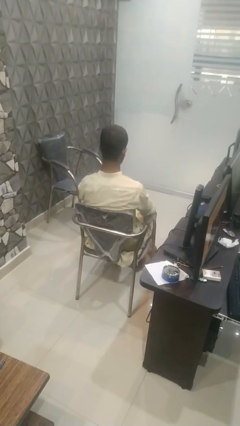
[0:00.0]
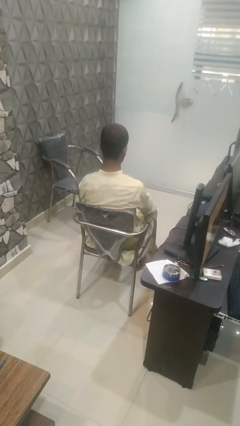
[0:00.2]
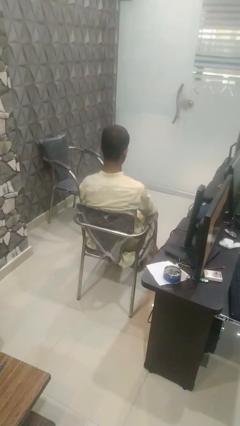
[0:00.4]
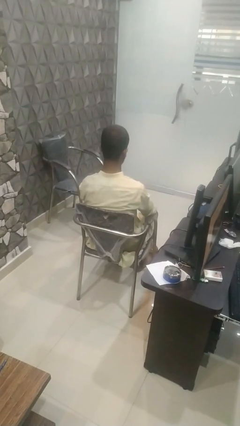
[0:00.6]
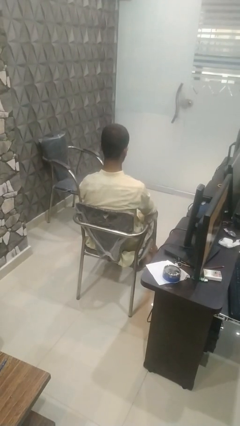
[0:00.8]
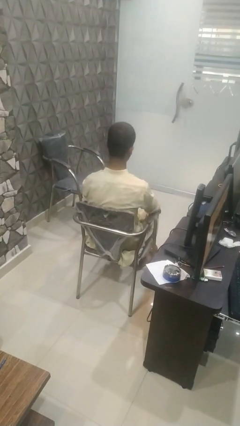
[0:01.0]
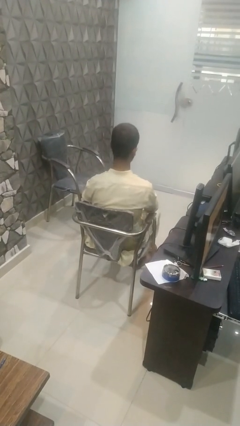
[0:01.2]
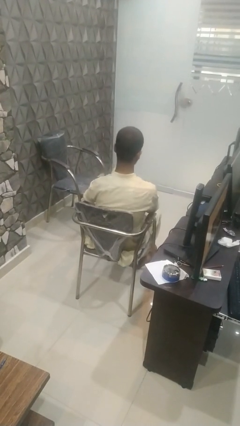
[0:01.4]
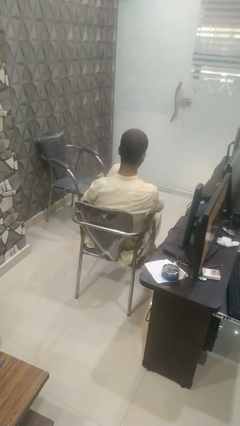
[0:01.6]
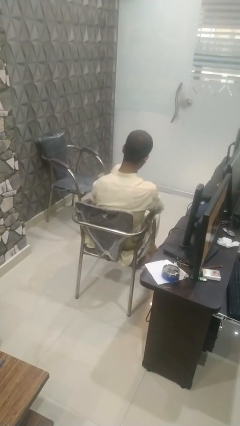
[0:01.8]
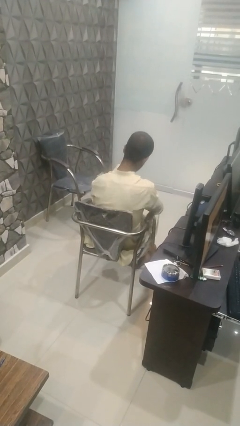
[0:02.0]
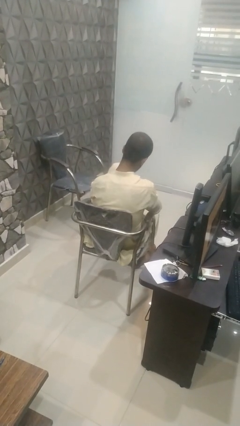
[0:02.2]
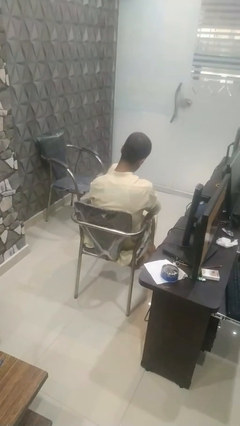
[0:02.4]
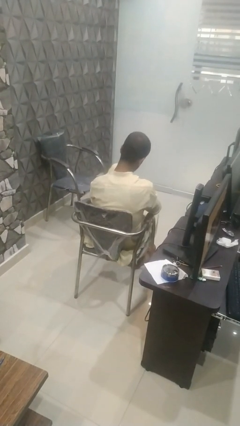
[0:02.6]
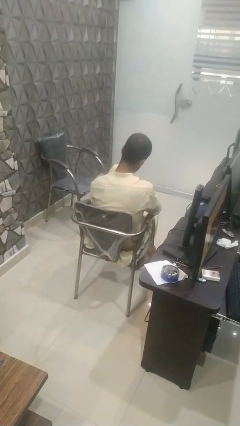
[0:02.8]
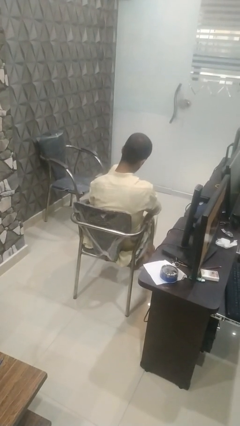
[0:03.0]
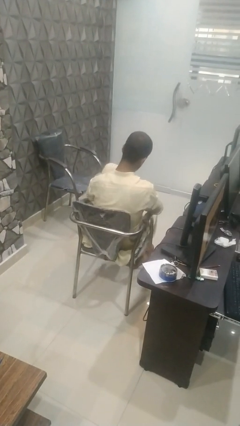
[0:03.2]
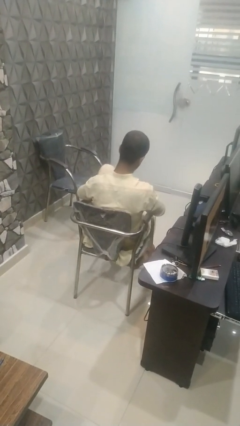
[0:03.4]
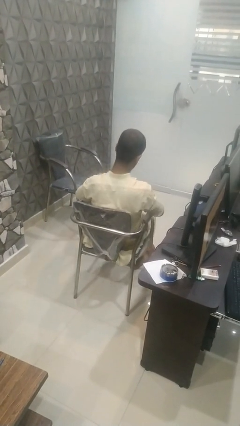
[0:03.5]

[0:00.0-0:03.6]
person rubs foot

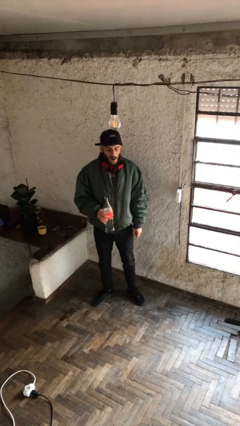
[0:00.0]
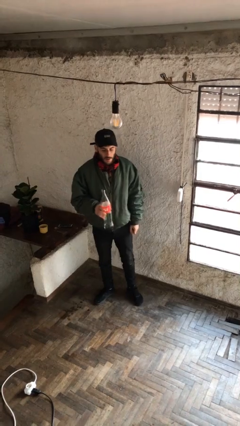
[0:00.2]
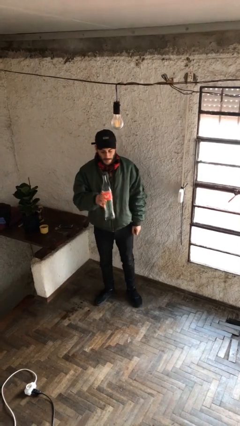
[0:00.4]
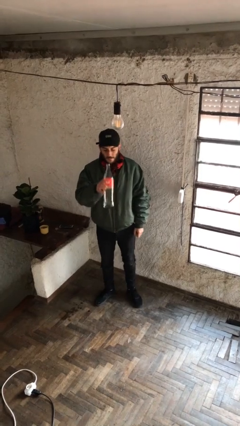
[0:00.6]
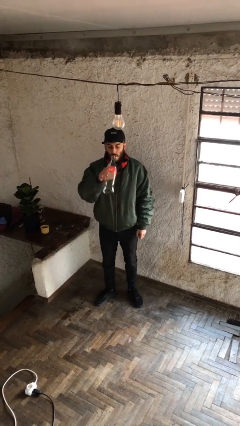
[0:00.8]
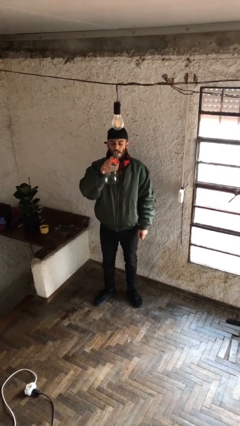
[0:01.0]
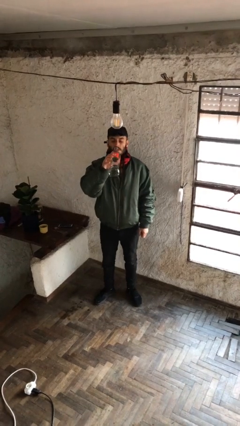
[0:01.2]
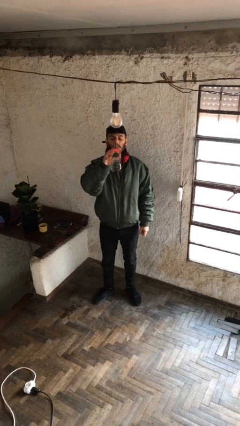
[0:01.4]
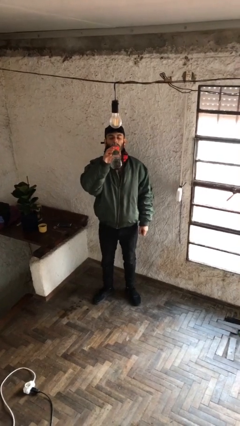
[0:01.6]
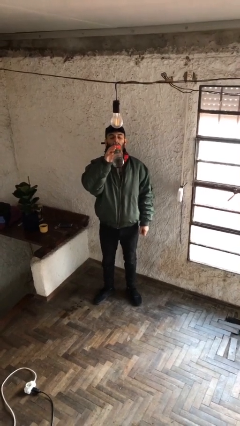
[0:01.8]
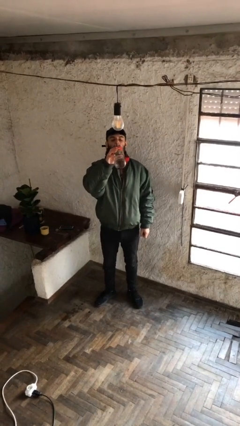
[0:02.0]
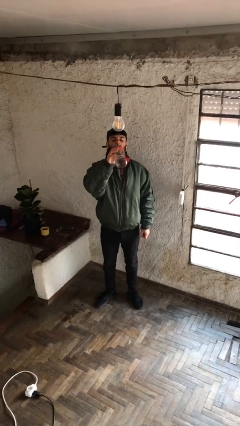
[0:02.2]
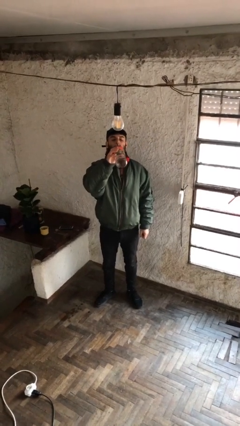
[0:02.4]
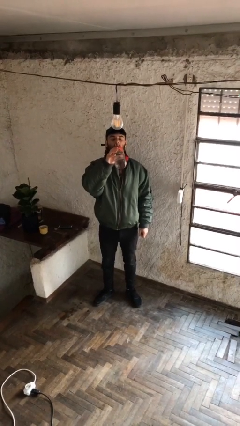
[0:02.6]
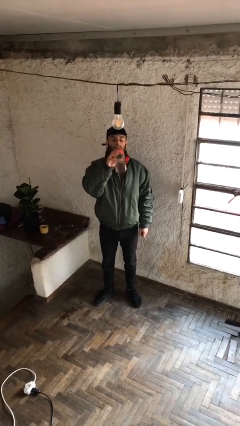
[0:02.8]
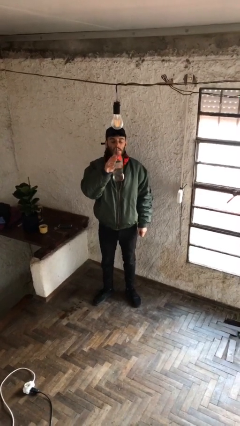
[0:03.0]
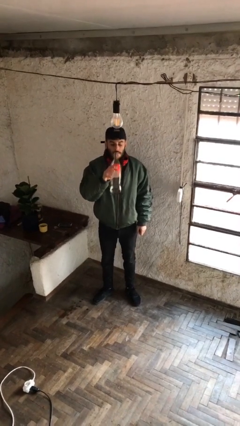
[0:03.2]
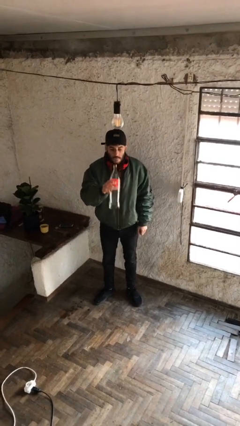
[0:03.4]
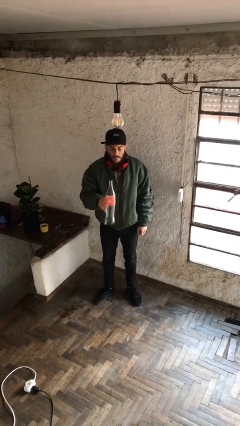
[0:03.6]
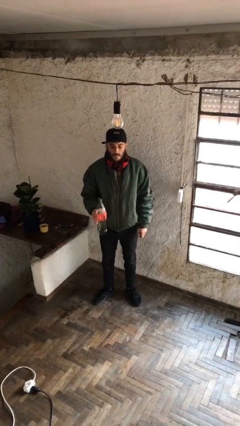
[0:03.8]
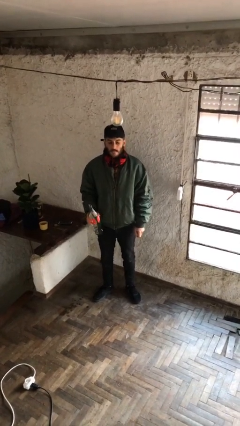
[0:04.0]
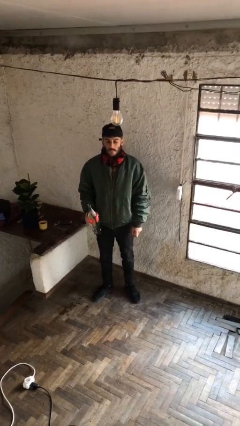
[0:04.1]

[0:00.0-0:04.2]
person drinks from bottle

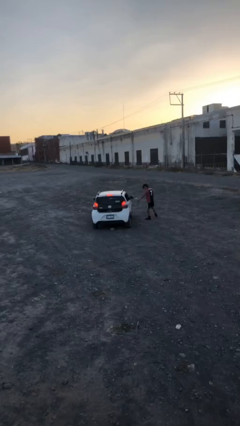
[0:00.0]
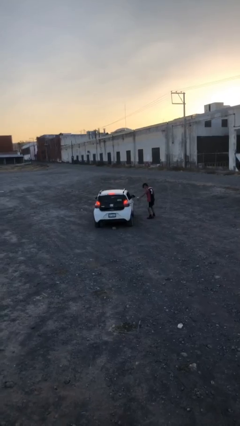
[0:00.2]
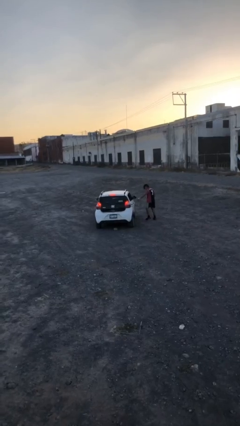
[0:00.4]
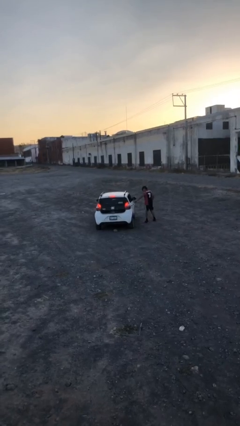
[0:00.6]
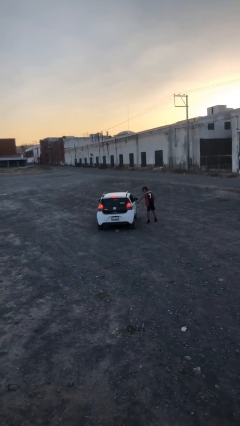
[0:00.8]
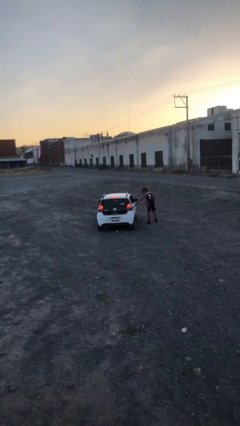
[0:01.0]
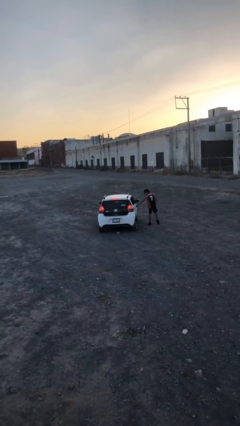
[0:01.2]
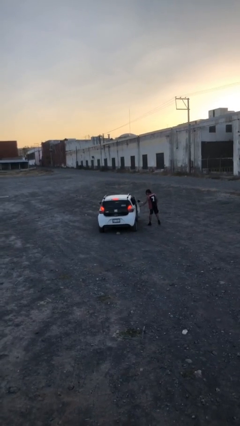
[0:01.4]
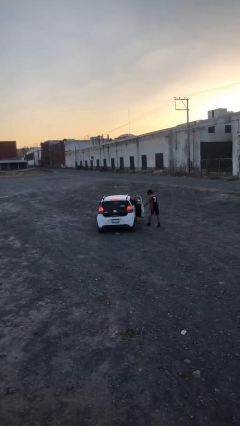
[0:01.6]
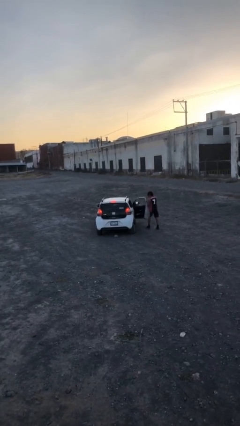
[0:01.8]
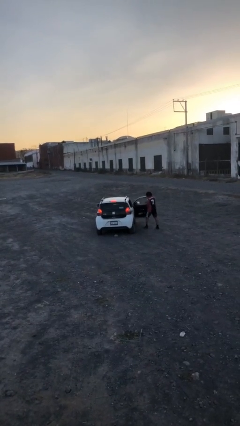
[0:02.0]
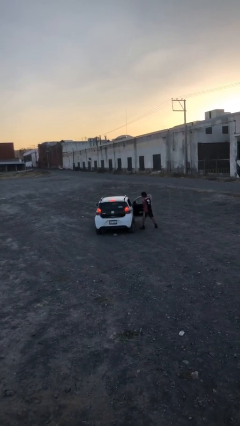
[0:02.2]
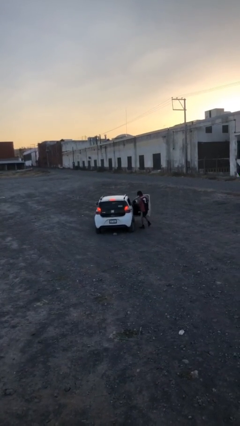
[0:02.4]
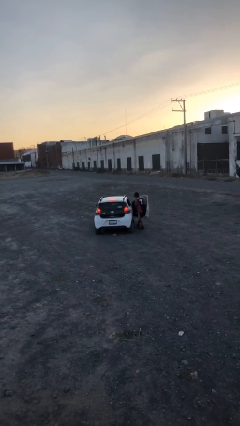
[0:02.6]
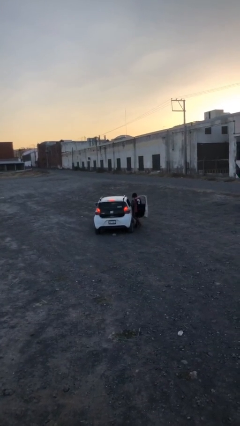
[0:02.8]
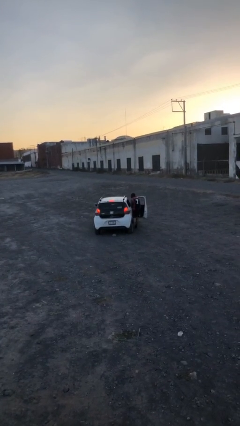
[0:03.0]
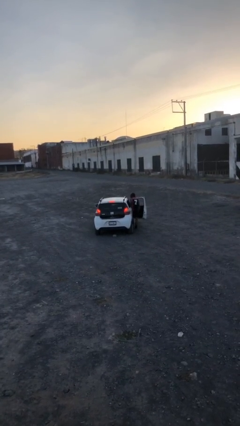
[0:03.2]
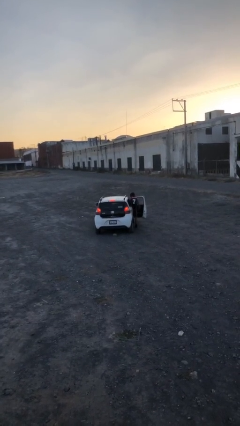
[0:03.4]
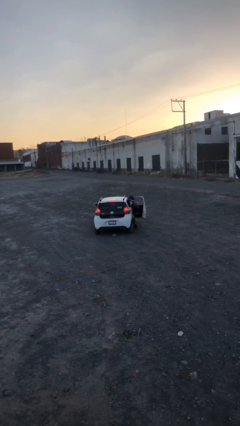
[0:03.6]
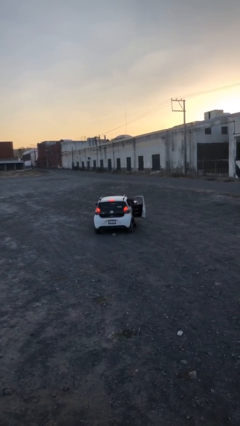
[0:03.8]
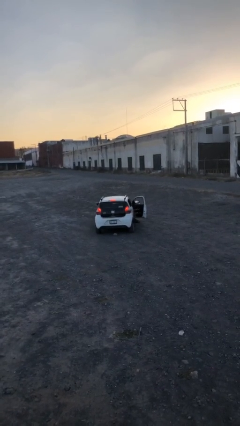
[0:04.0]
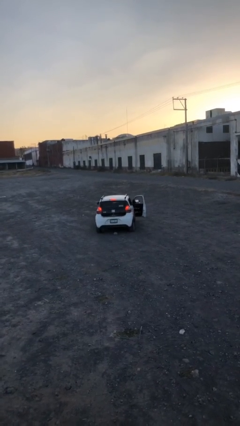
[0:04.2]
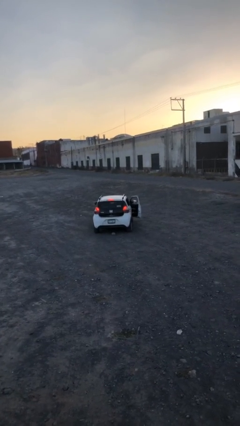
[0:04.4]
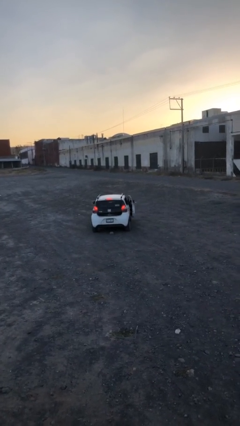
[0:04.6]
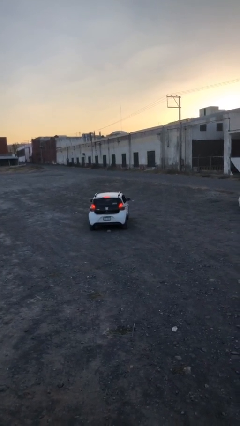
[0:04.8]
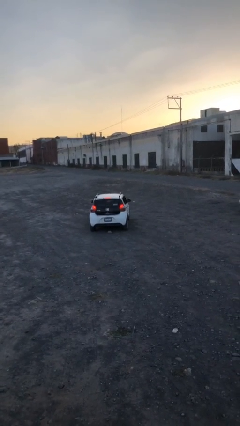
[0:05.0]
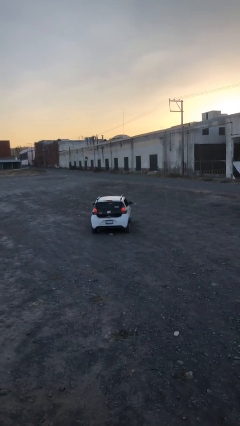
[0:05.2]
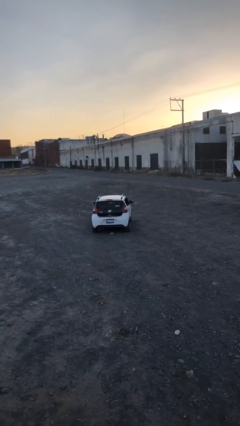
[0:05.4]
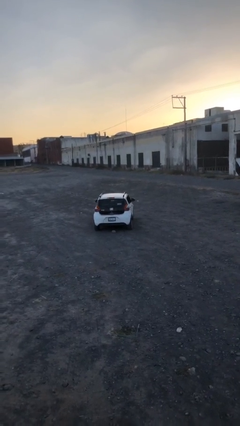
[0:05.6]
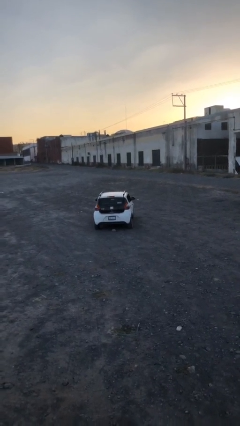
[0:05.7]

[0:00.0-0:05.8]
car picks up person

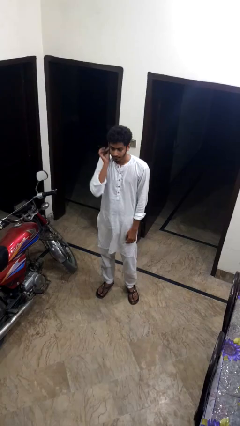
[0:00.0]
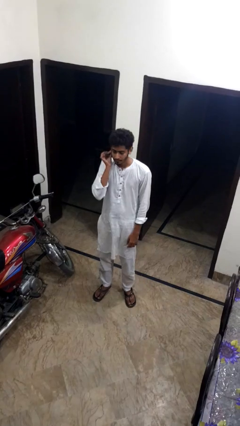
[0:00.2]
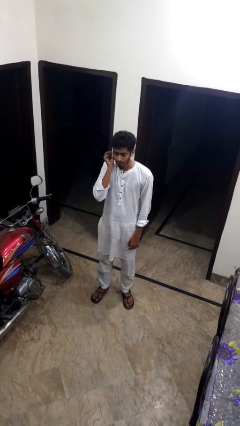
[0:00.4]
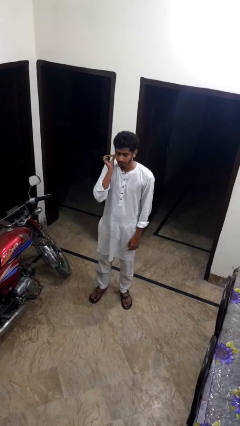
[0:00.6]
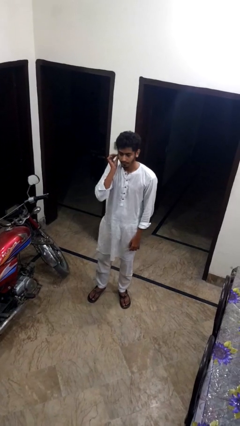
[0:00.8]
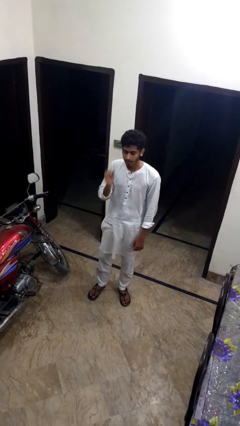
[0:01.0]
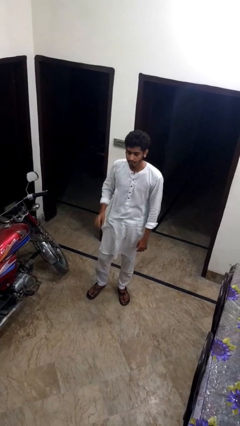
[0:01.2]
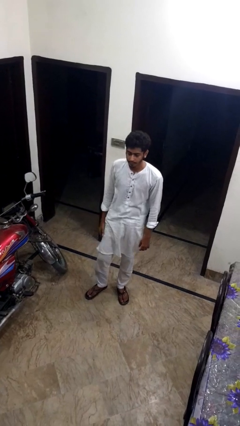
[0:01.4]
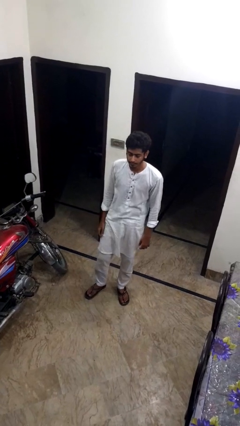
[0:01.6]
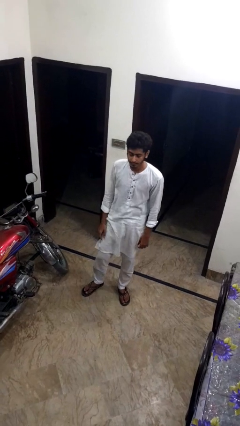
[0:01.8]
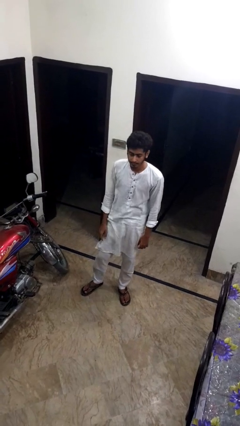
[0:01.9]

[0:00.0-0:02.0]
person touches earlobe

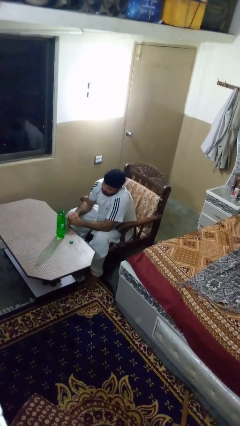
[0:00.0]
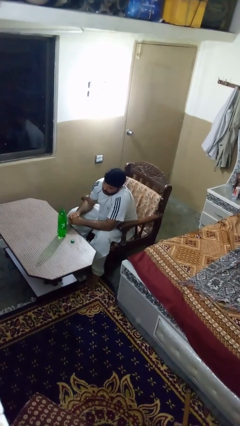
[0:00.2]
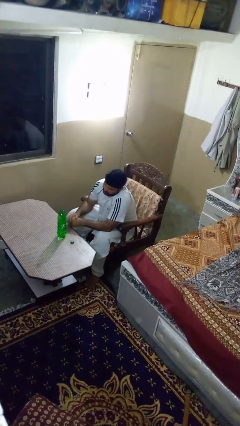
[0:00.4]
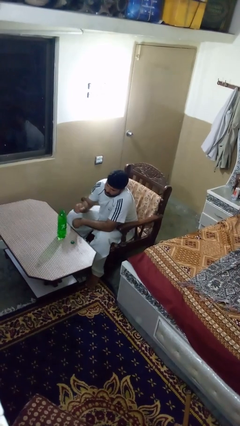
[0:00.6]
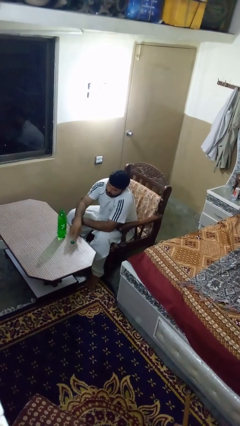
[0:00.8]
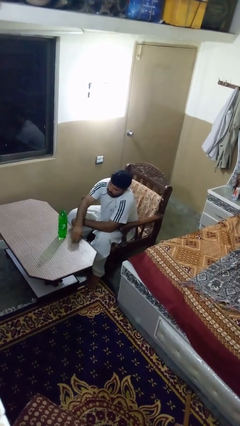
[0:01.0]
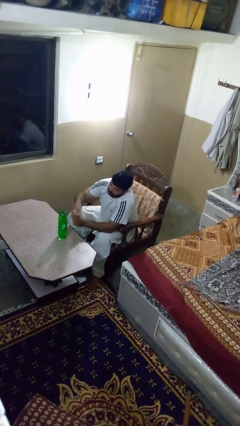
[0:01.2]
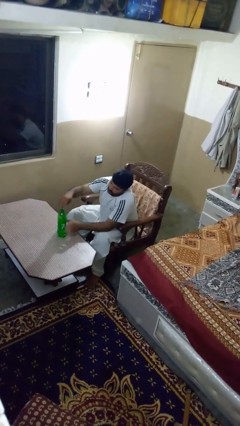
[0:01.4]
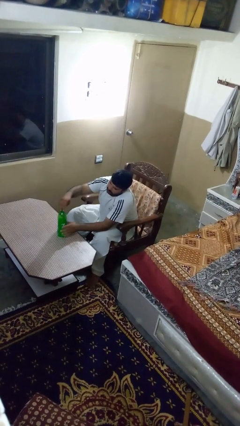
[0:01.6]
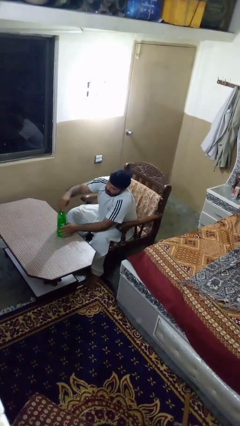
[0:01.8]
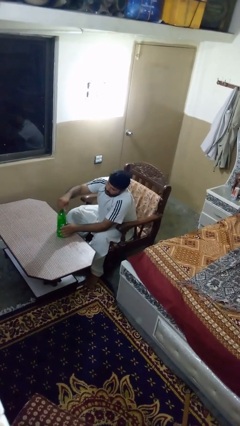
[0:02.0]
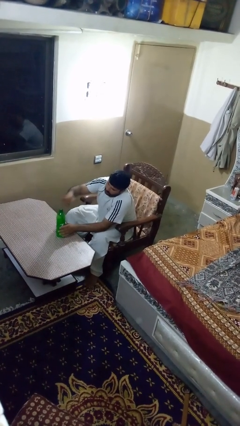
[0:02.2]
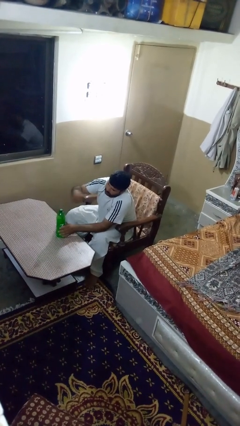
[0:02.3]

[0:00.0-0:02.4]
person screws lid to bottle
